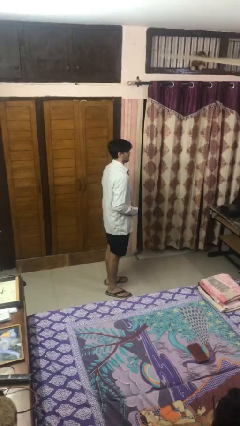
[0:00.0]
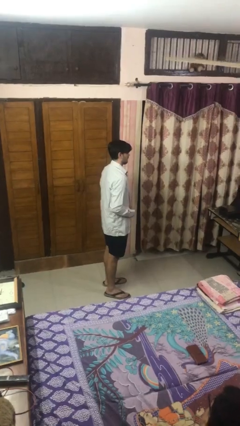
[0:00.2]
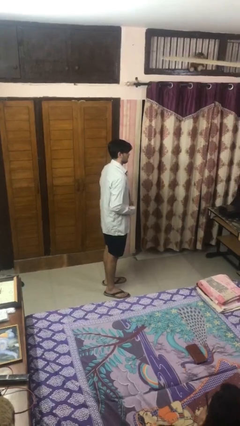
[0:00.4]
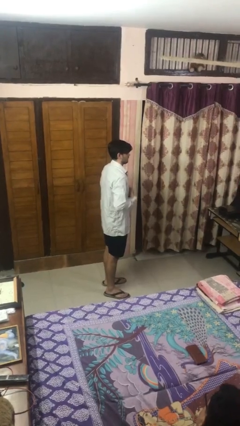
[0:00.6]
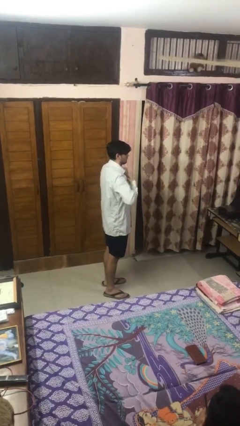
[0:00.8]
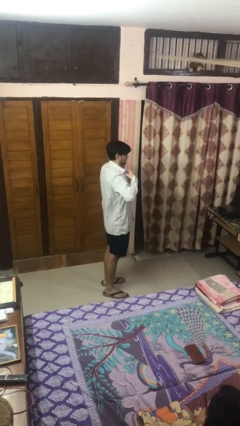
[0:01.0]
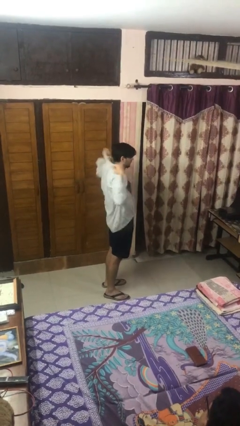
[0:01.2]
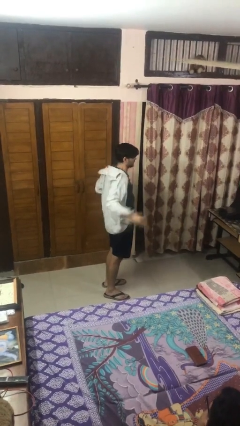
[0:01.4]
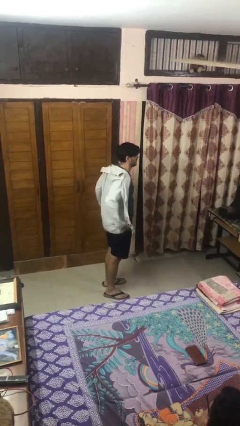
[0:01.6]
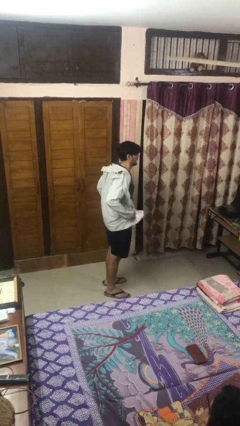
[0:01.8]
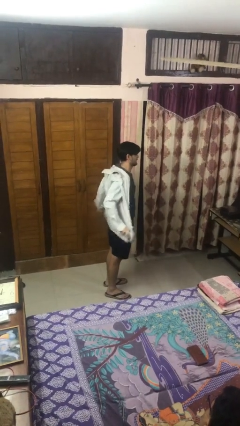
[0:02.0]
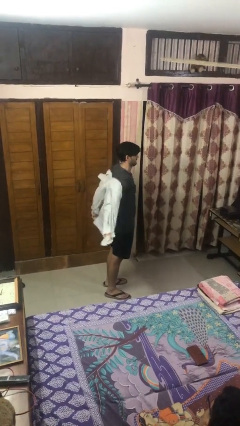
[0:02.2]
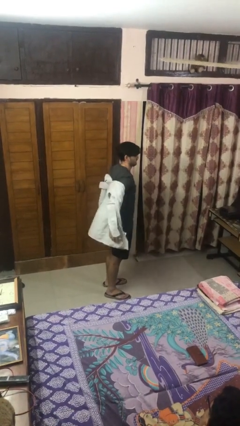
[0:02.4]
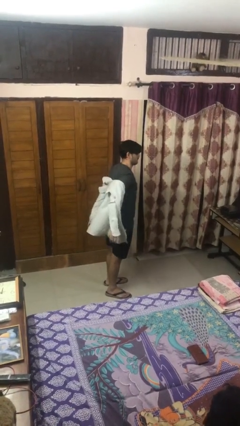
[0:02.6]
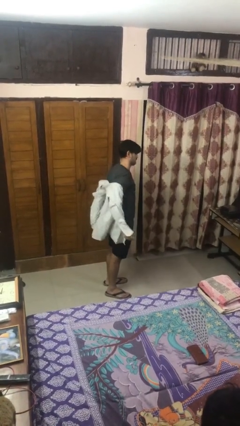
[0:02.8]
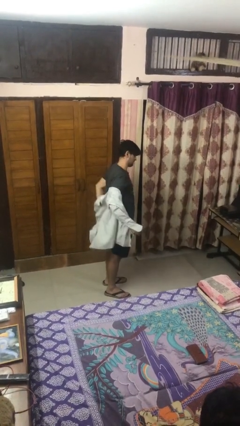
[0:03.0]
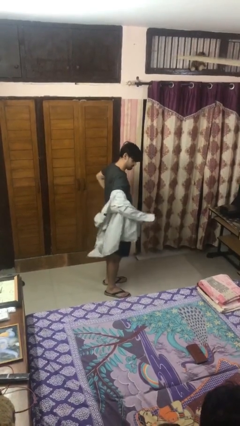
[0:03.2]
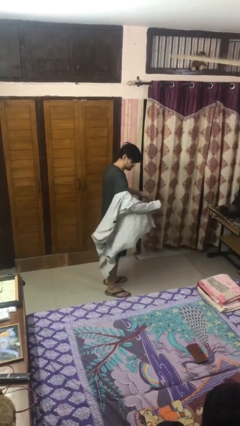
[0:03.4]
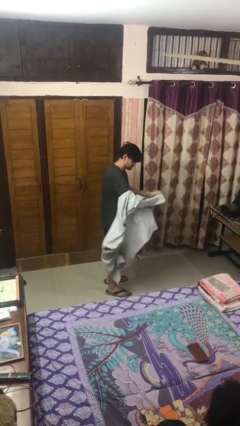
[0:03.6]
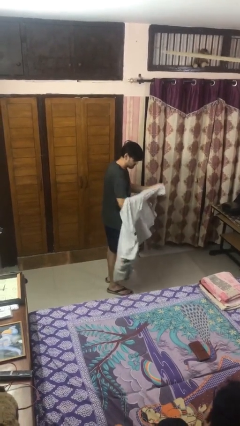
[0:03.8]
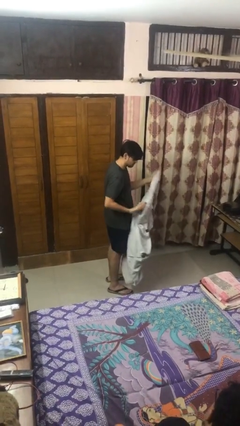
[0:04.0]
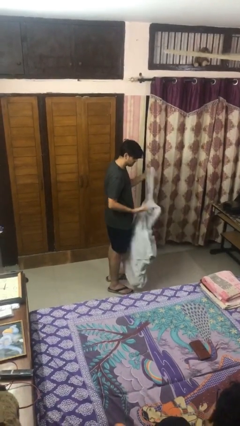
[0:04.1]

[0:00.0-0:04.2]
person takes off shirt

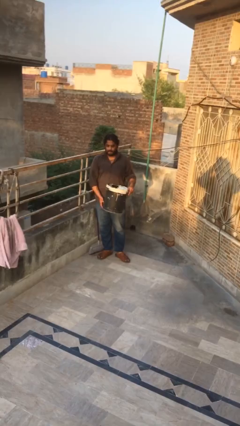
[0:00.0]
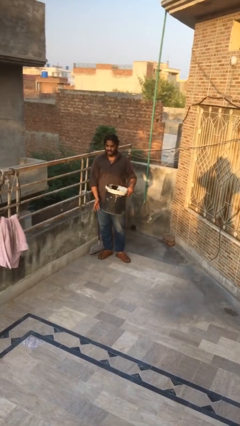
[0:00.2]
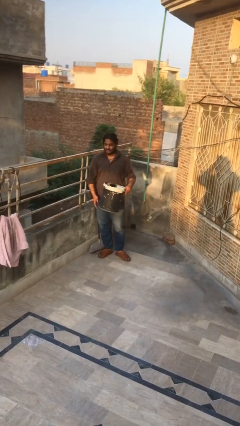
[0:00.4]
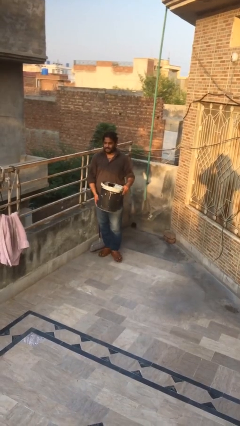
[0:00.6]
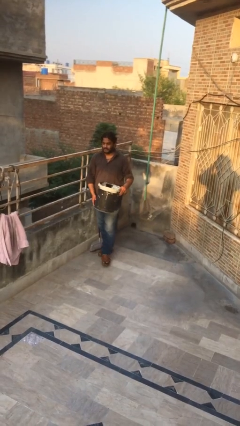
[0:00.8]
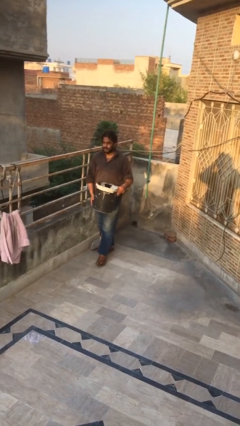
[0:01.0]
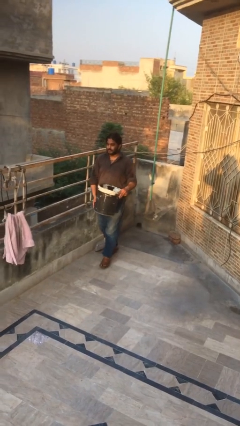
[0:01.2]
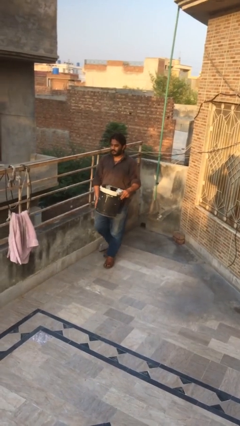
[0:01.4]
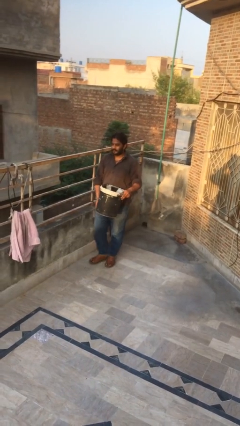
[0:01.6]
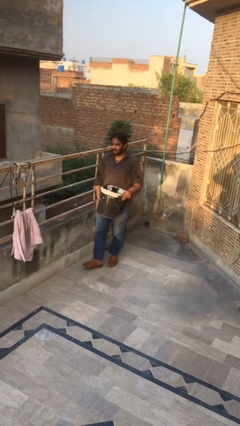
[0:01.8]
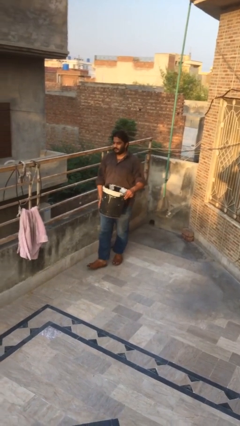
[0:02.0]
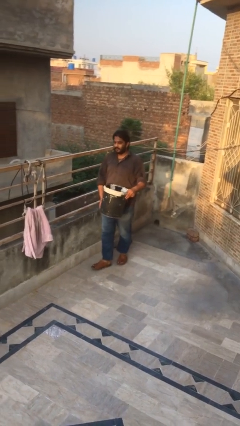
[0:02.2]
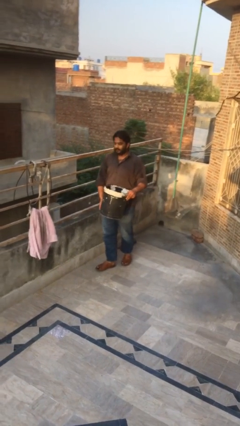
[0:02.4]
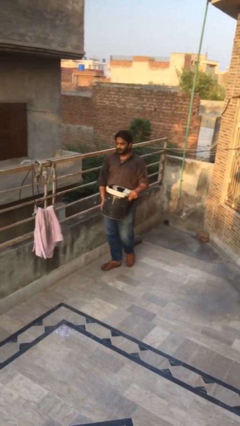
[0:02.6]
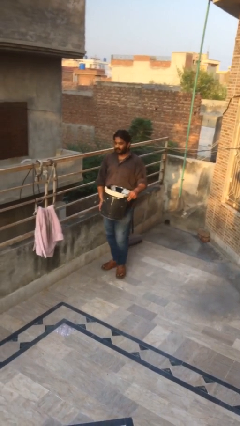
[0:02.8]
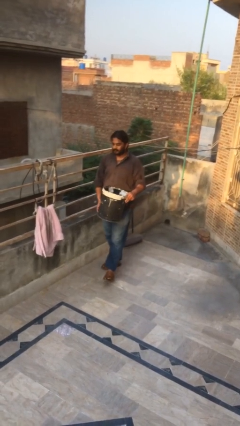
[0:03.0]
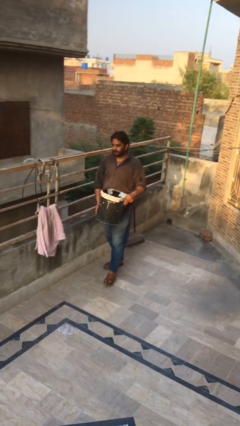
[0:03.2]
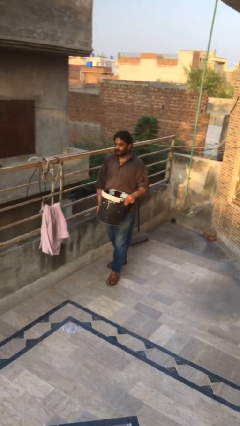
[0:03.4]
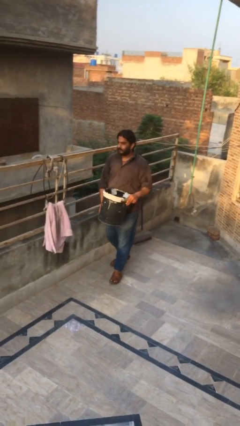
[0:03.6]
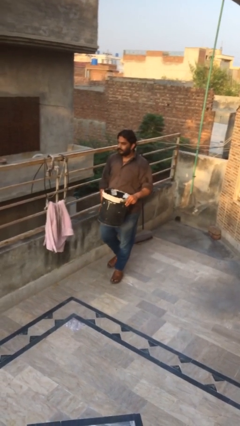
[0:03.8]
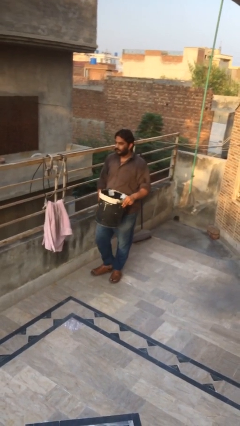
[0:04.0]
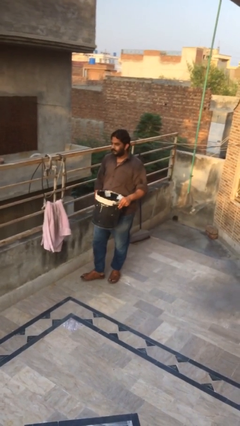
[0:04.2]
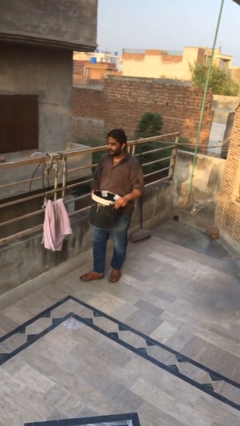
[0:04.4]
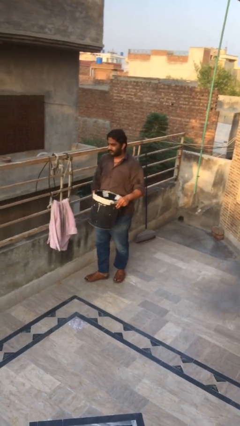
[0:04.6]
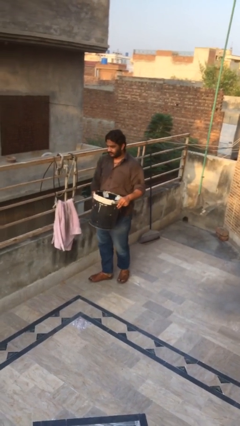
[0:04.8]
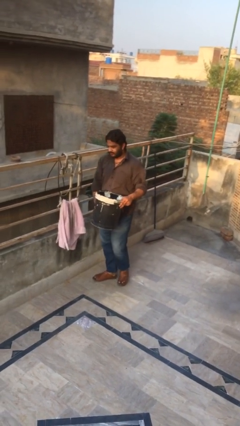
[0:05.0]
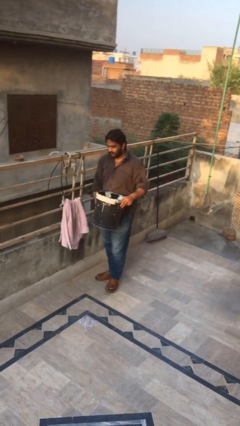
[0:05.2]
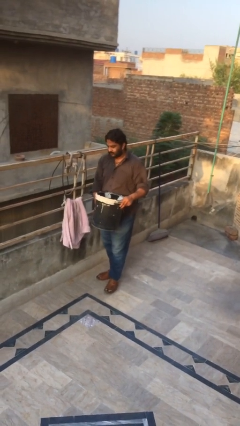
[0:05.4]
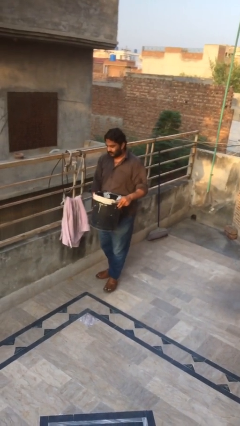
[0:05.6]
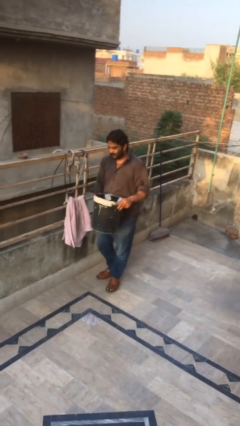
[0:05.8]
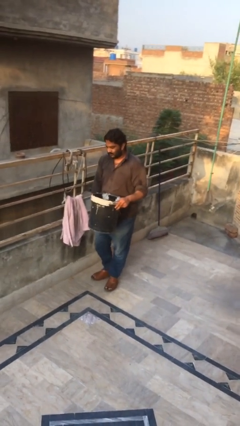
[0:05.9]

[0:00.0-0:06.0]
person carries heavy object

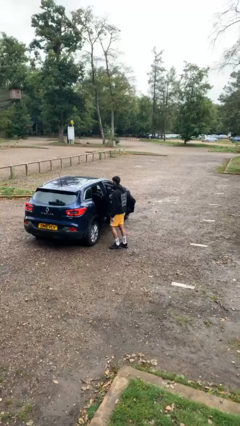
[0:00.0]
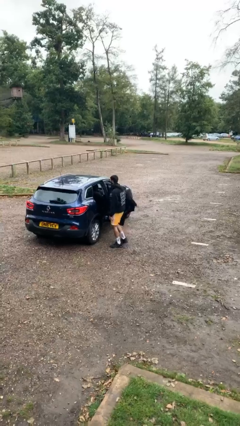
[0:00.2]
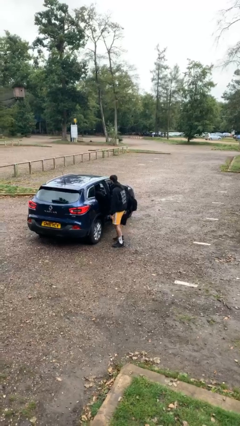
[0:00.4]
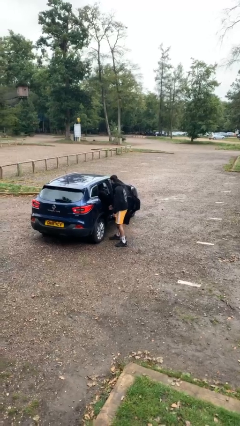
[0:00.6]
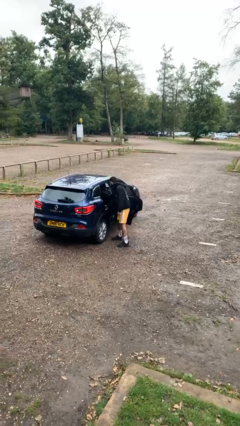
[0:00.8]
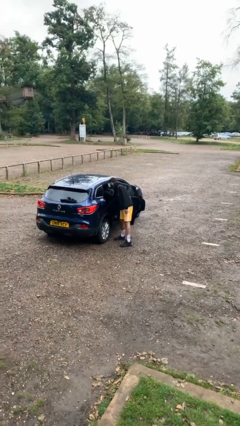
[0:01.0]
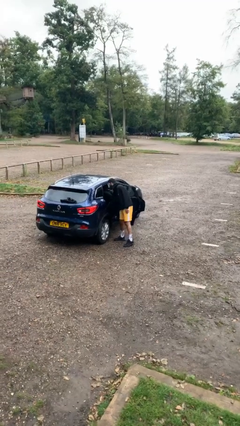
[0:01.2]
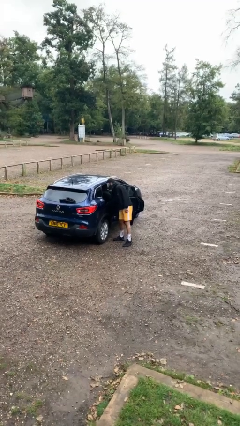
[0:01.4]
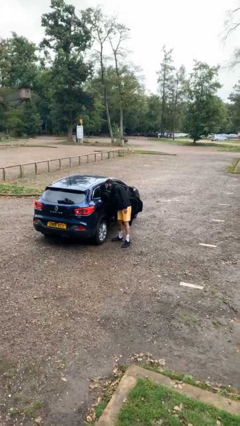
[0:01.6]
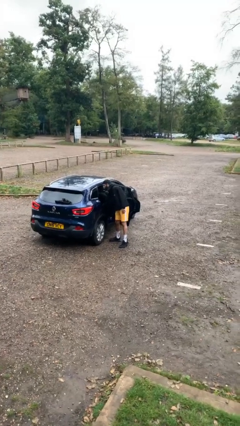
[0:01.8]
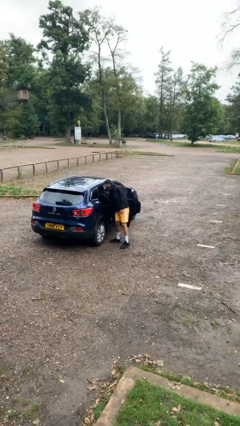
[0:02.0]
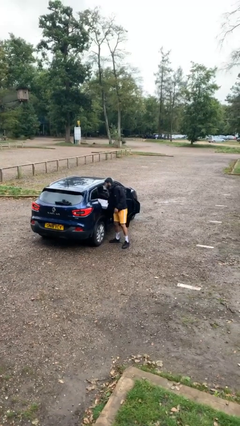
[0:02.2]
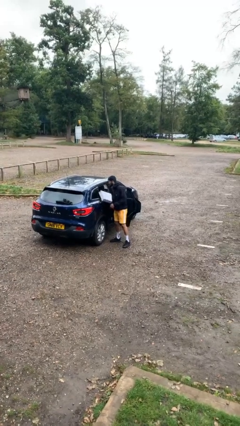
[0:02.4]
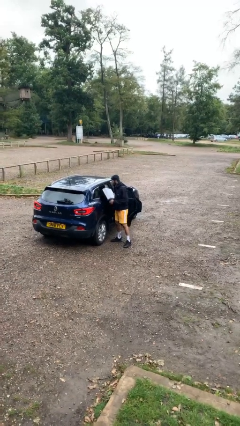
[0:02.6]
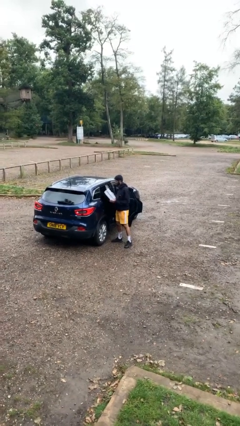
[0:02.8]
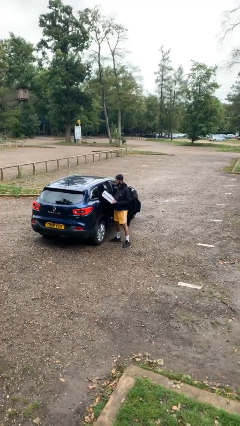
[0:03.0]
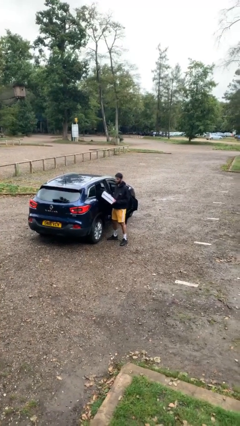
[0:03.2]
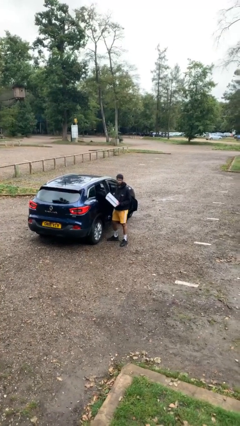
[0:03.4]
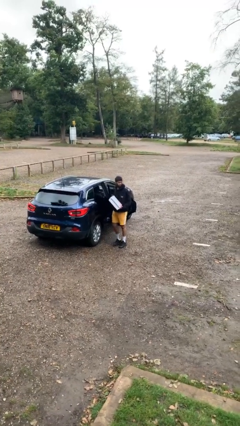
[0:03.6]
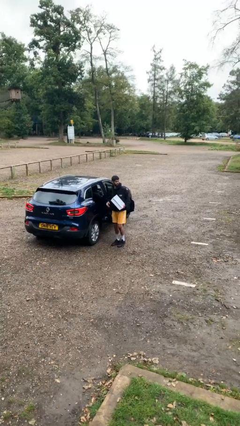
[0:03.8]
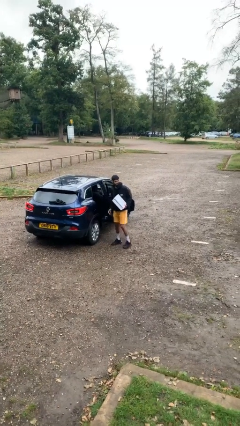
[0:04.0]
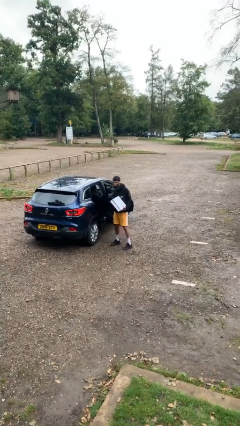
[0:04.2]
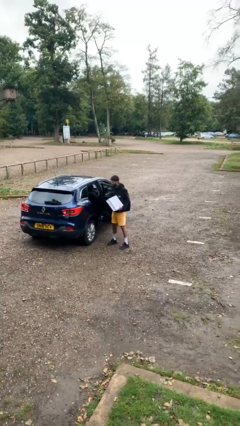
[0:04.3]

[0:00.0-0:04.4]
person unloads car

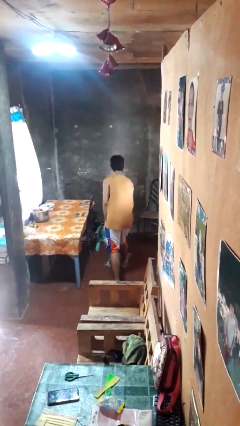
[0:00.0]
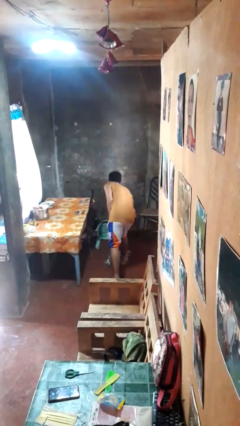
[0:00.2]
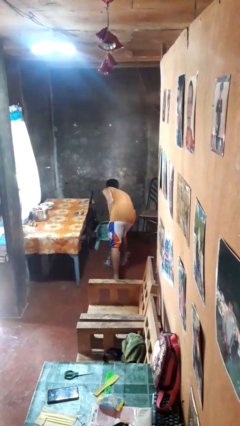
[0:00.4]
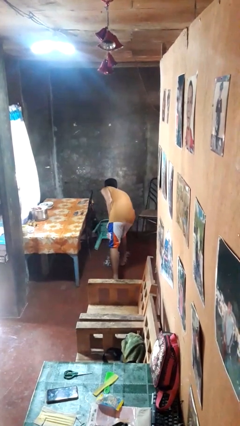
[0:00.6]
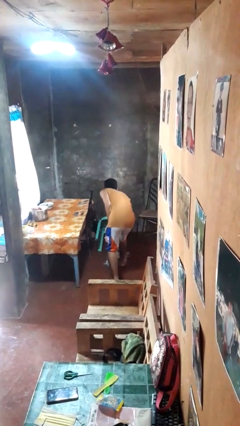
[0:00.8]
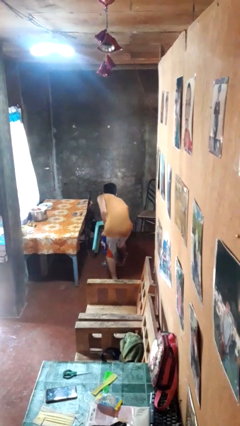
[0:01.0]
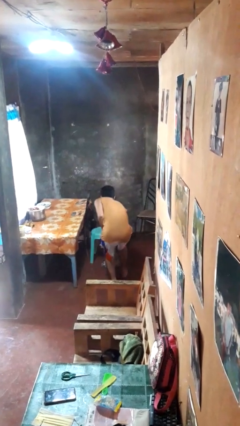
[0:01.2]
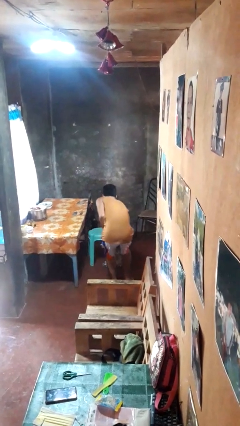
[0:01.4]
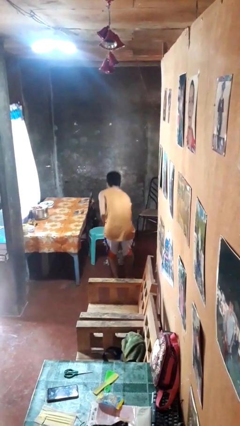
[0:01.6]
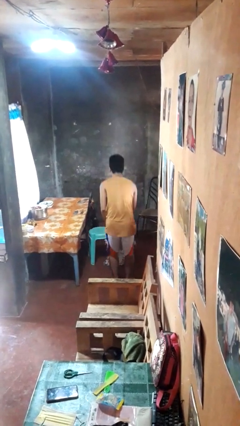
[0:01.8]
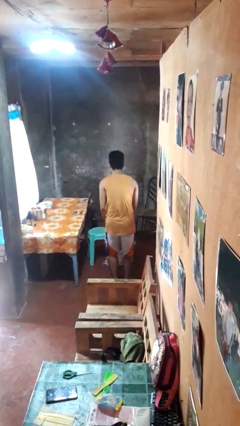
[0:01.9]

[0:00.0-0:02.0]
person sets upright furniture

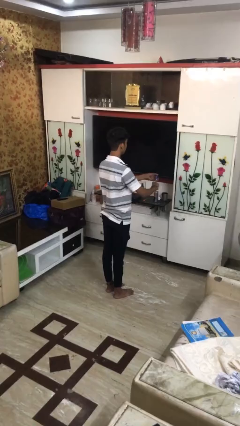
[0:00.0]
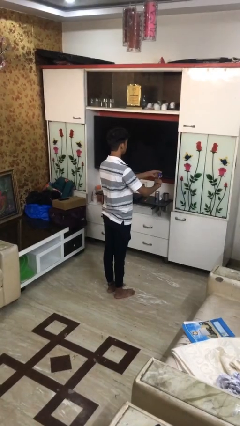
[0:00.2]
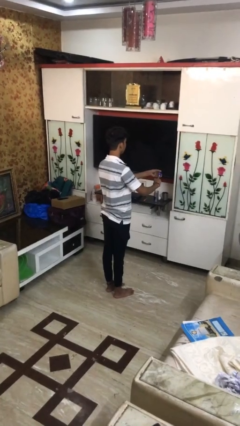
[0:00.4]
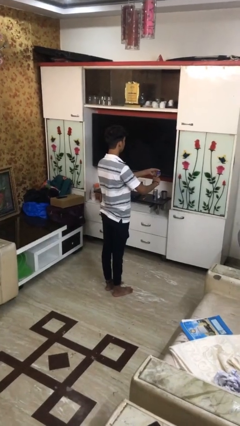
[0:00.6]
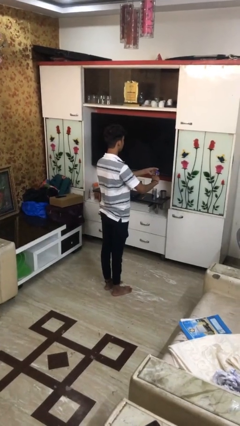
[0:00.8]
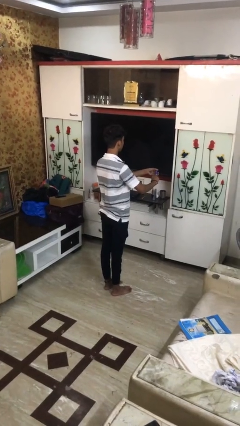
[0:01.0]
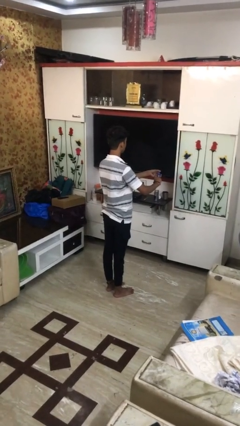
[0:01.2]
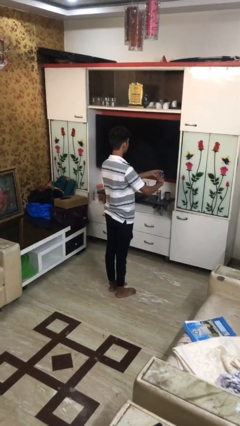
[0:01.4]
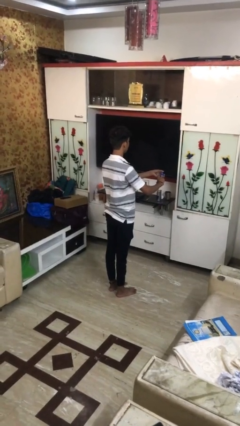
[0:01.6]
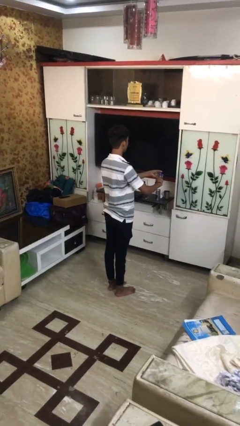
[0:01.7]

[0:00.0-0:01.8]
person clips fingernails
